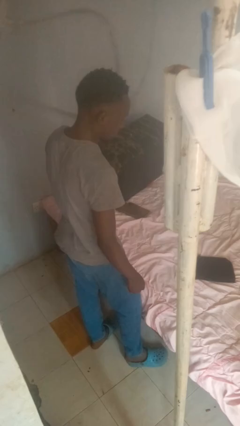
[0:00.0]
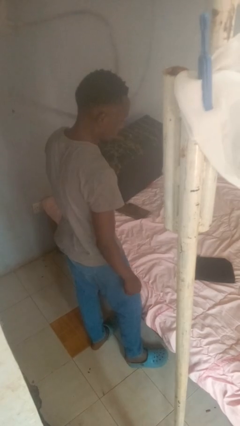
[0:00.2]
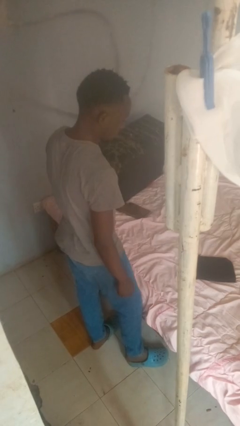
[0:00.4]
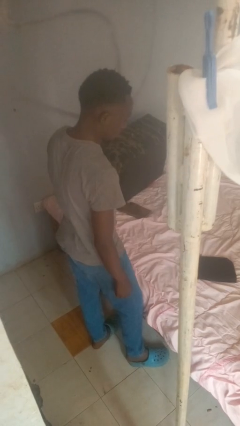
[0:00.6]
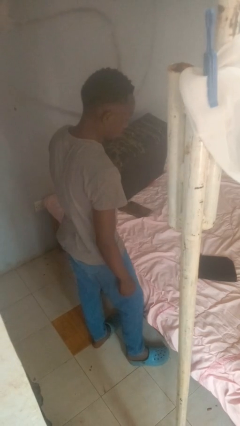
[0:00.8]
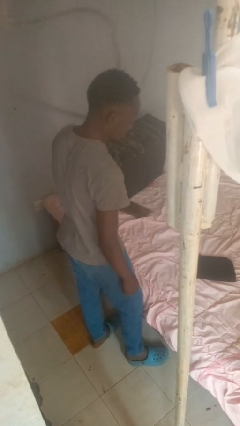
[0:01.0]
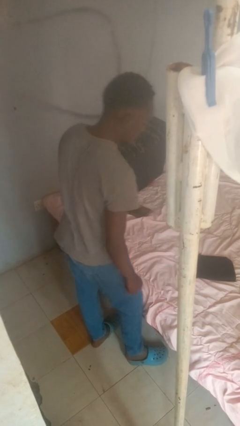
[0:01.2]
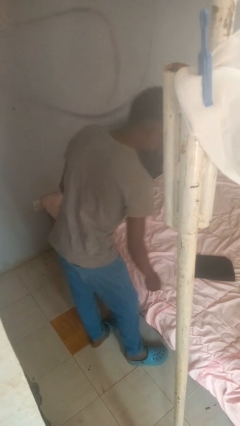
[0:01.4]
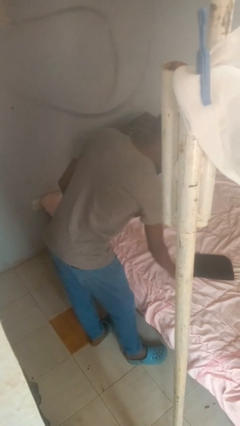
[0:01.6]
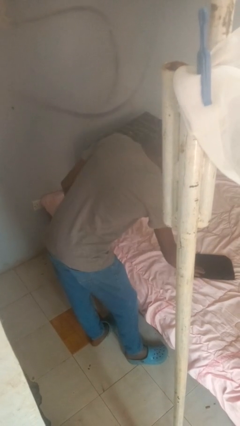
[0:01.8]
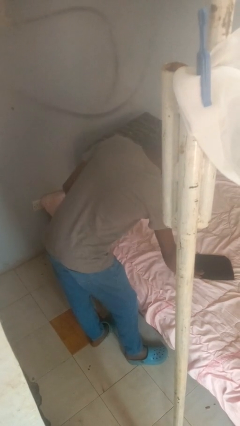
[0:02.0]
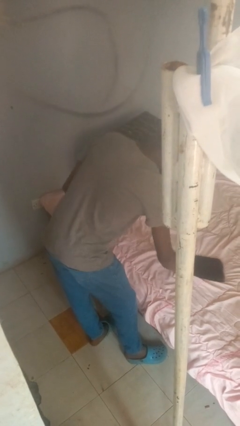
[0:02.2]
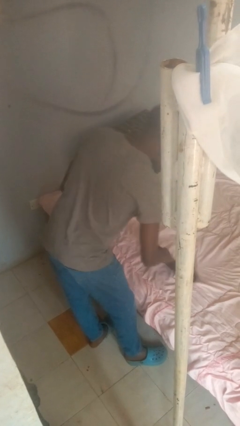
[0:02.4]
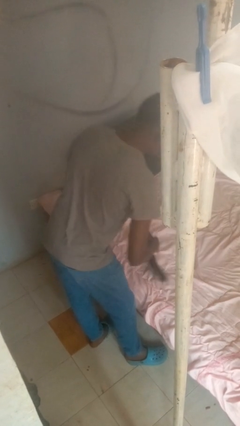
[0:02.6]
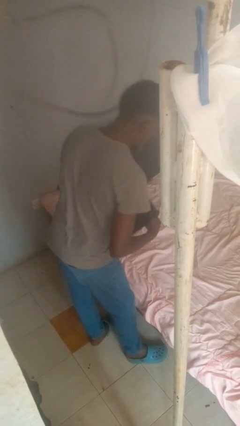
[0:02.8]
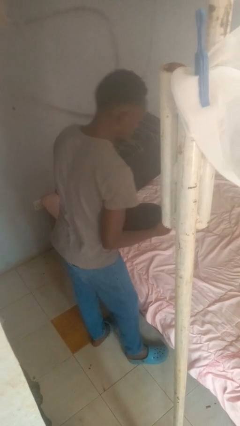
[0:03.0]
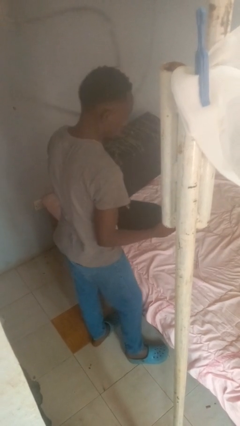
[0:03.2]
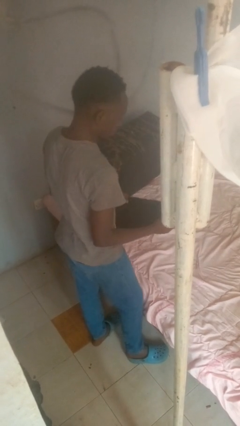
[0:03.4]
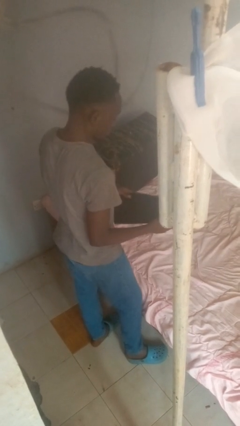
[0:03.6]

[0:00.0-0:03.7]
person picks up object from bed

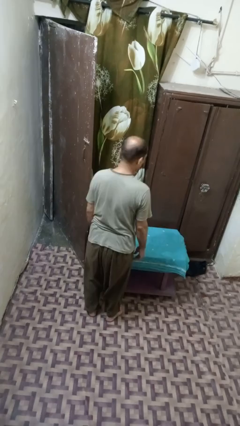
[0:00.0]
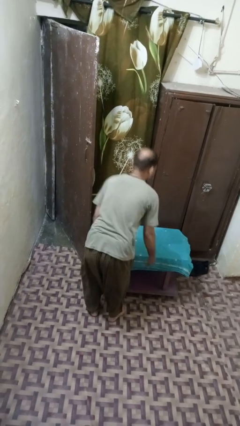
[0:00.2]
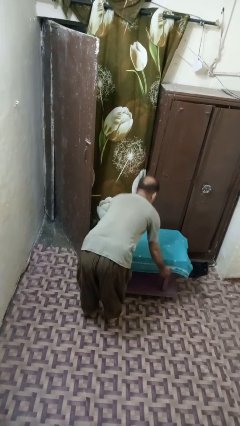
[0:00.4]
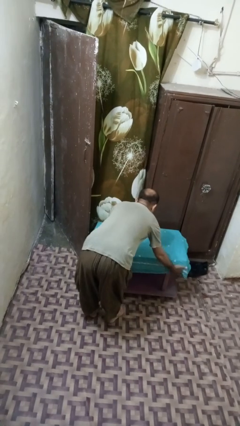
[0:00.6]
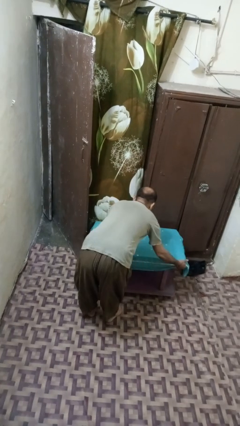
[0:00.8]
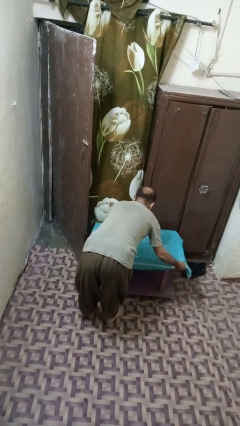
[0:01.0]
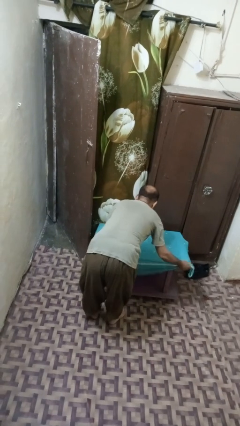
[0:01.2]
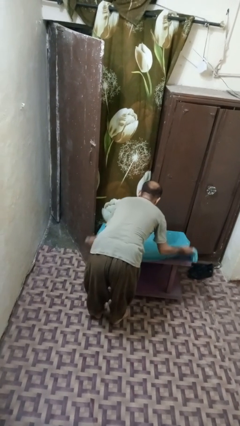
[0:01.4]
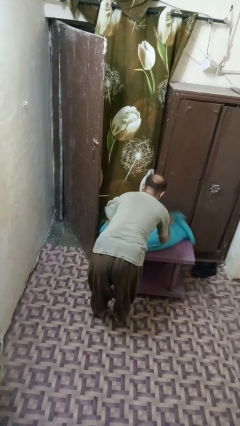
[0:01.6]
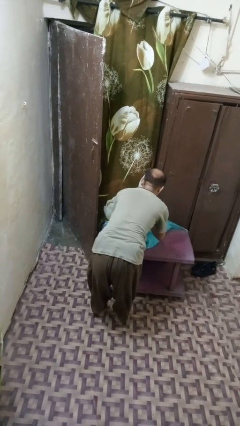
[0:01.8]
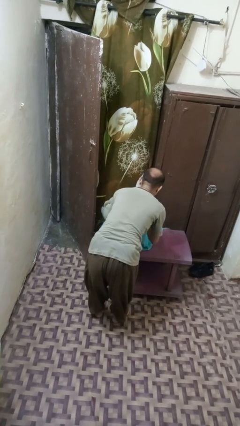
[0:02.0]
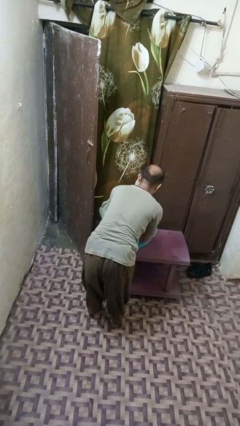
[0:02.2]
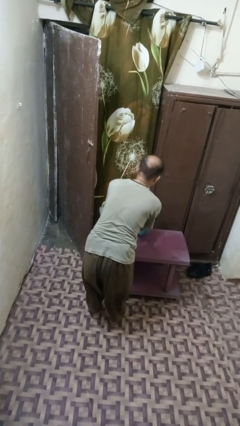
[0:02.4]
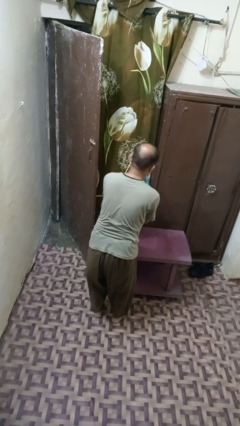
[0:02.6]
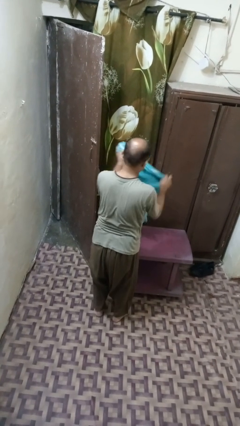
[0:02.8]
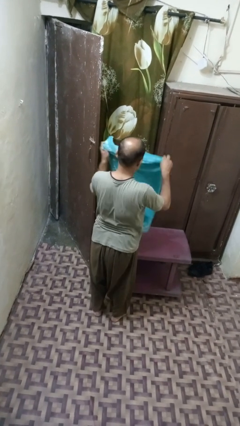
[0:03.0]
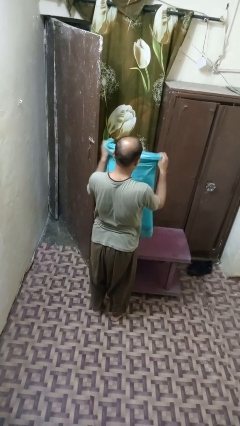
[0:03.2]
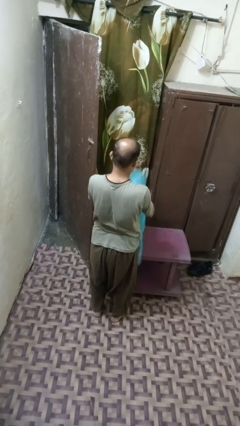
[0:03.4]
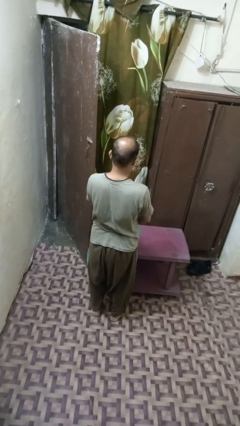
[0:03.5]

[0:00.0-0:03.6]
person folds tablecloth

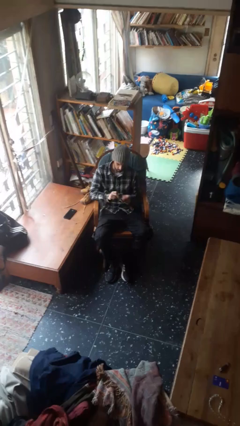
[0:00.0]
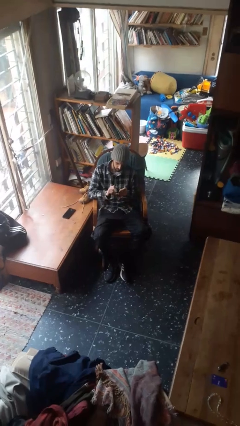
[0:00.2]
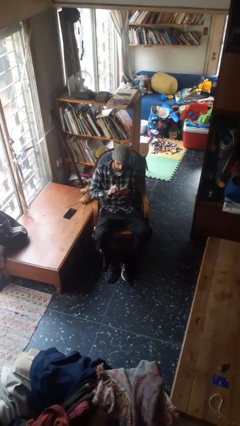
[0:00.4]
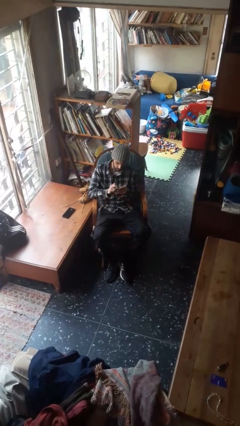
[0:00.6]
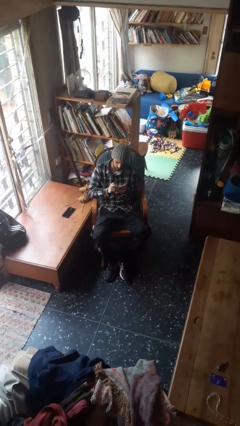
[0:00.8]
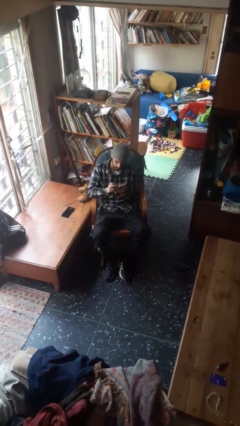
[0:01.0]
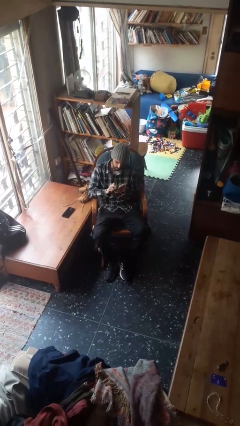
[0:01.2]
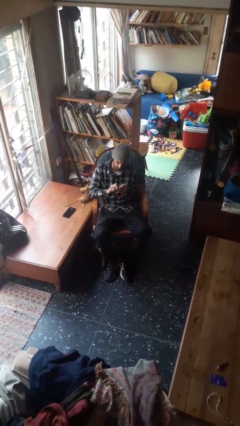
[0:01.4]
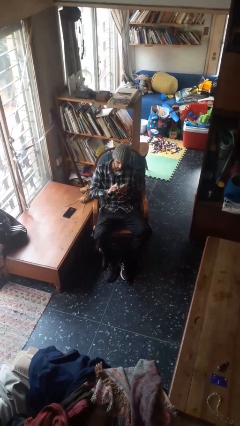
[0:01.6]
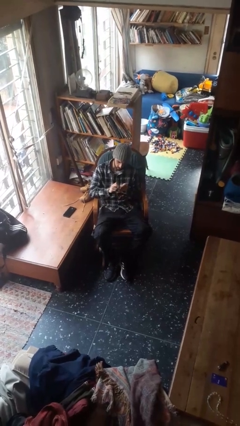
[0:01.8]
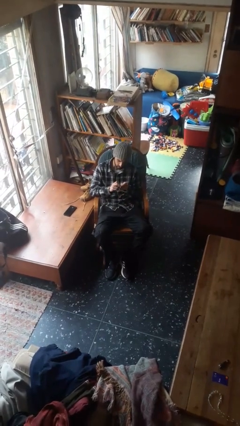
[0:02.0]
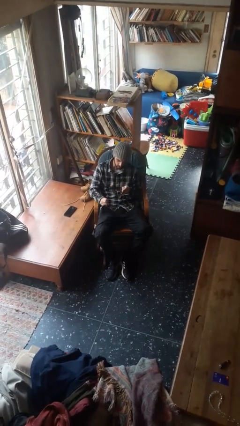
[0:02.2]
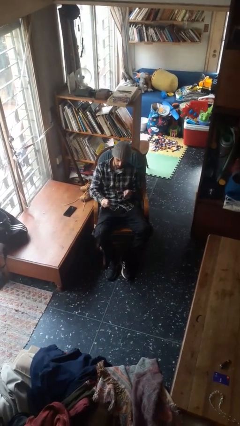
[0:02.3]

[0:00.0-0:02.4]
person files fingernails

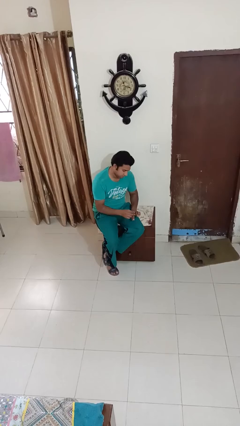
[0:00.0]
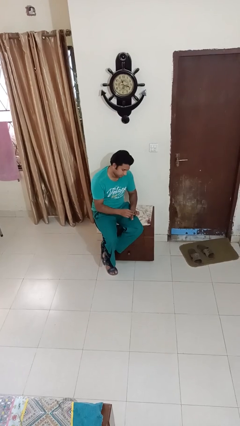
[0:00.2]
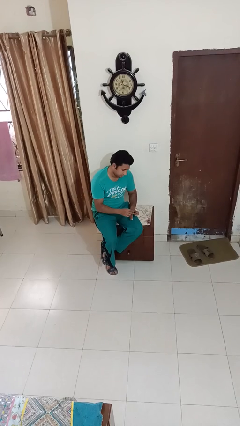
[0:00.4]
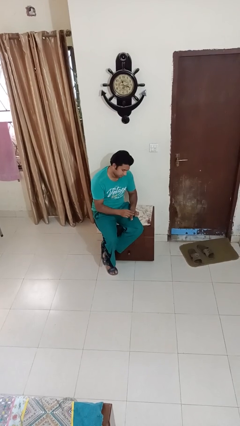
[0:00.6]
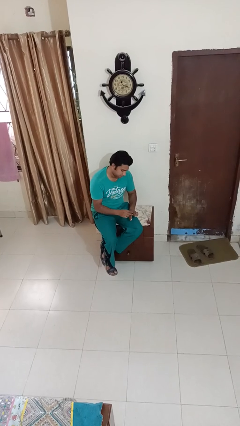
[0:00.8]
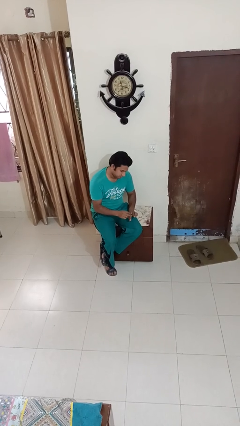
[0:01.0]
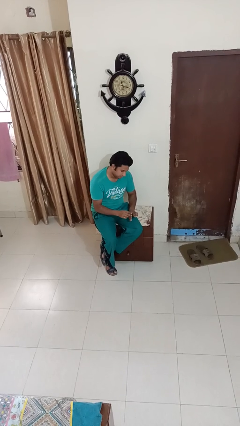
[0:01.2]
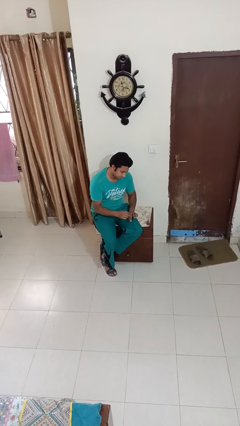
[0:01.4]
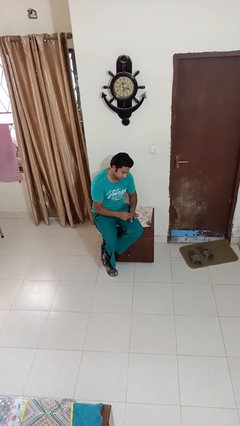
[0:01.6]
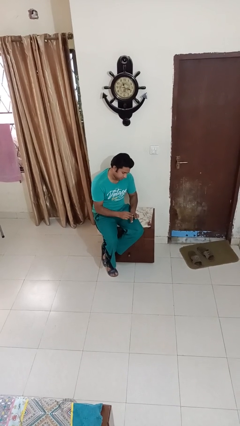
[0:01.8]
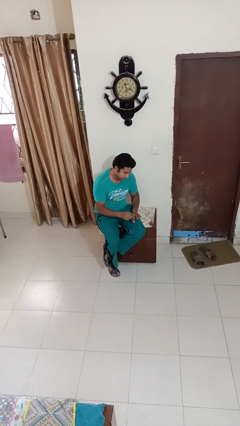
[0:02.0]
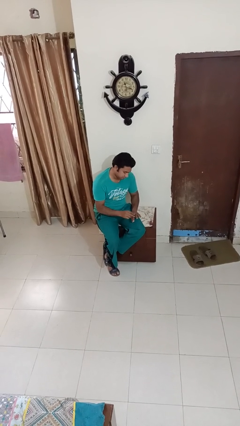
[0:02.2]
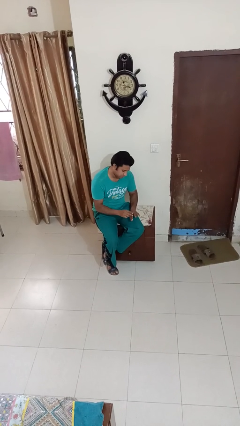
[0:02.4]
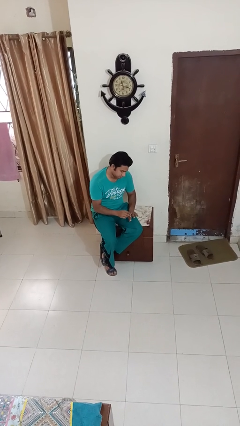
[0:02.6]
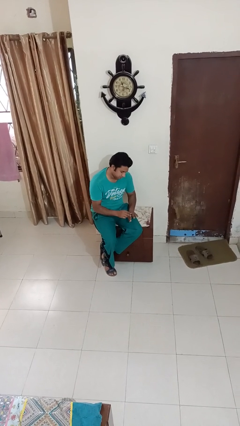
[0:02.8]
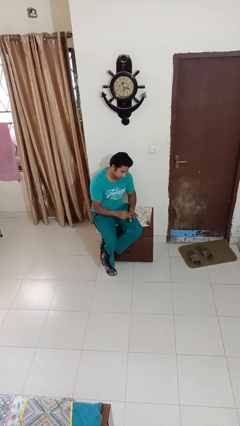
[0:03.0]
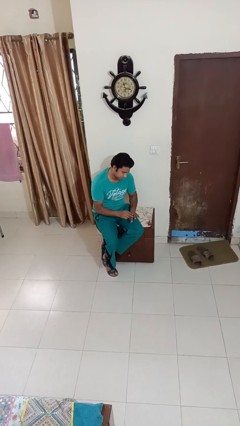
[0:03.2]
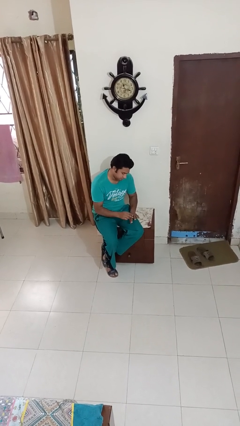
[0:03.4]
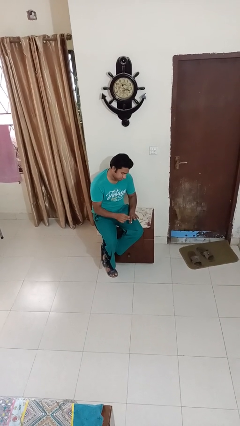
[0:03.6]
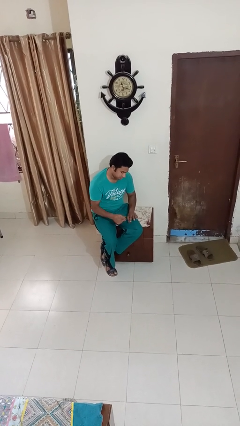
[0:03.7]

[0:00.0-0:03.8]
person paints fingernails

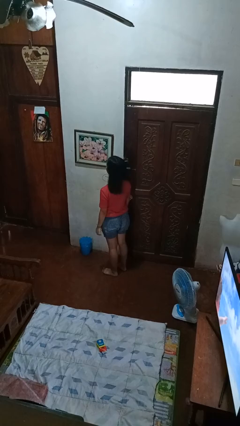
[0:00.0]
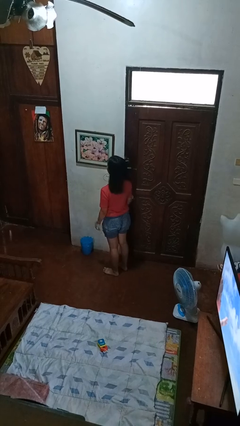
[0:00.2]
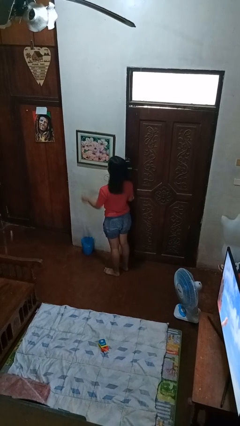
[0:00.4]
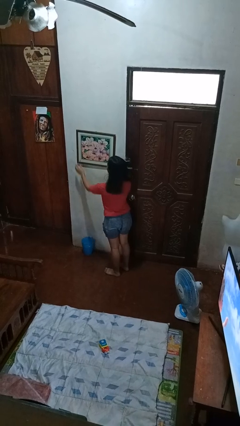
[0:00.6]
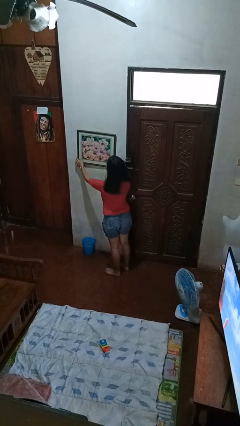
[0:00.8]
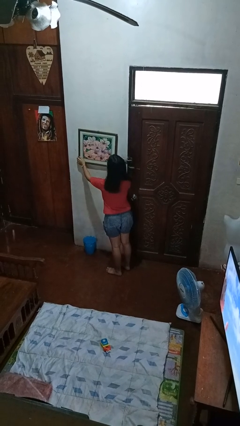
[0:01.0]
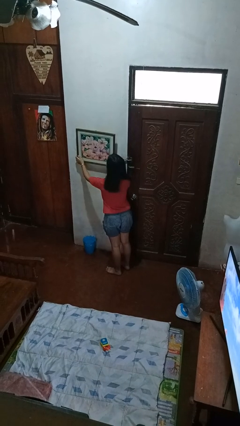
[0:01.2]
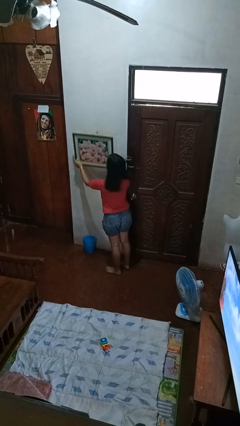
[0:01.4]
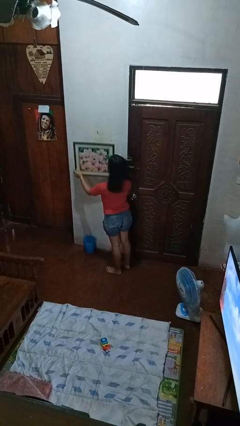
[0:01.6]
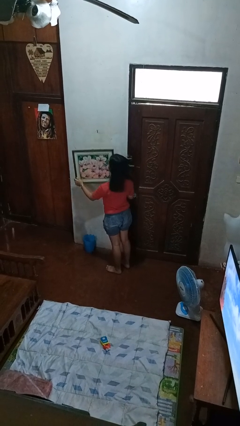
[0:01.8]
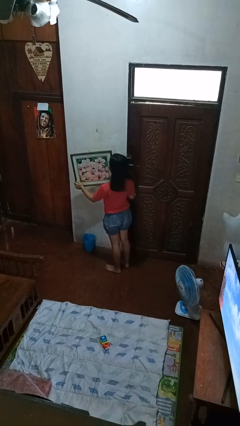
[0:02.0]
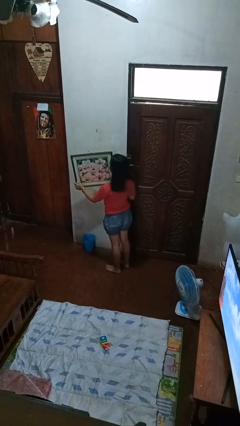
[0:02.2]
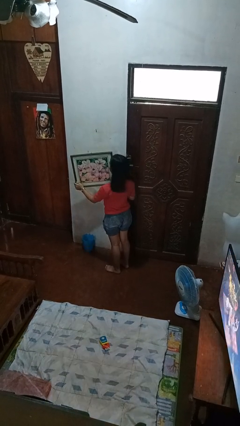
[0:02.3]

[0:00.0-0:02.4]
person takes down picture frame

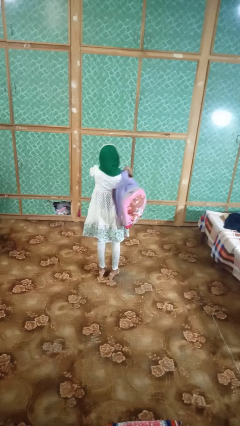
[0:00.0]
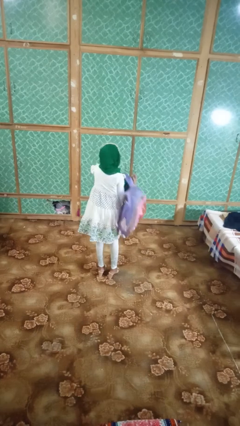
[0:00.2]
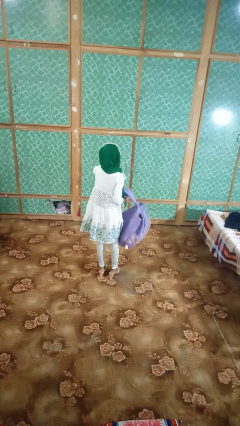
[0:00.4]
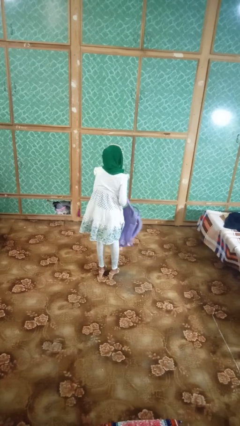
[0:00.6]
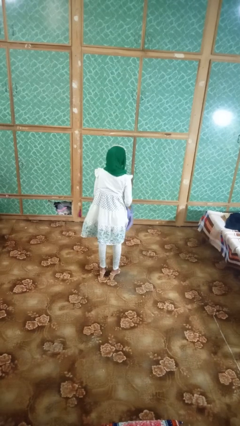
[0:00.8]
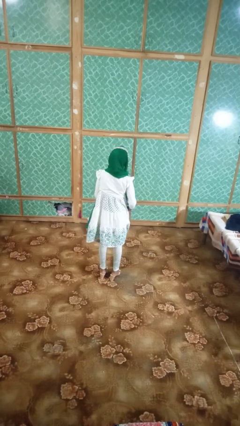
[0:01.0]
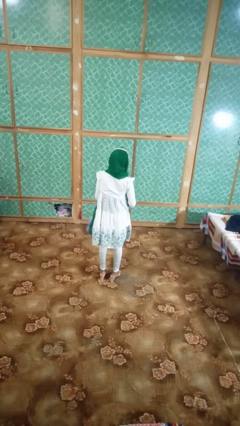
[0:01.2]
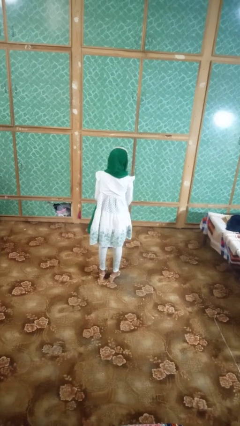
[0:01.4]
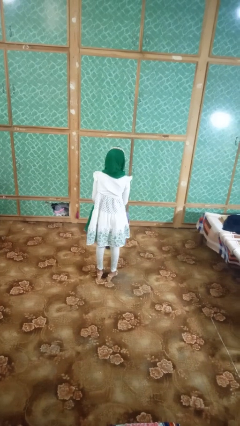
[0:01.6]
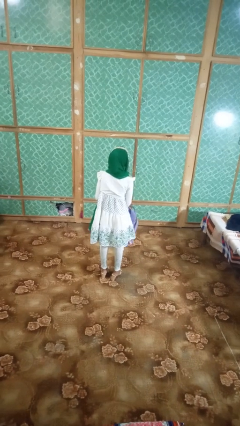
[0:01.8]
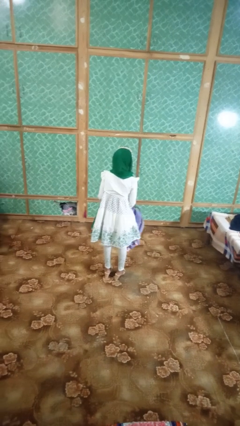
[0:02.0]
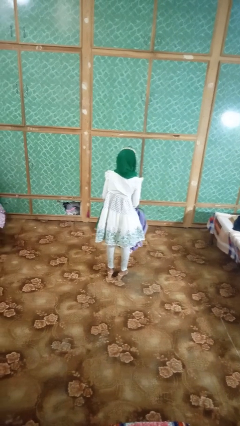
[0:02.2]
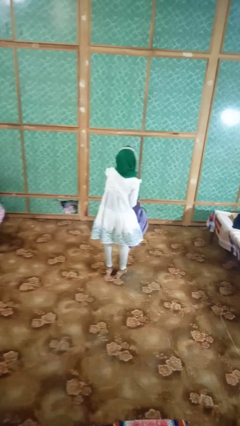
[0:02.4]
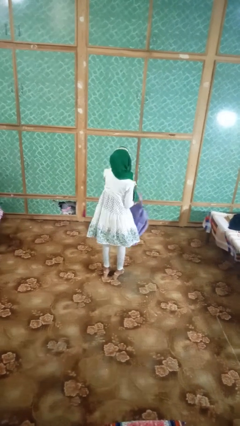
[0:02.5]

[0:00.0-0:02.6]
person takes off backpack
